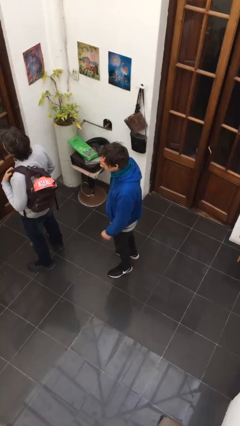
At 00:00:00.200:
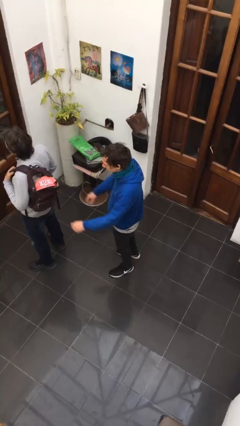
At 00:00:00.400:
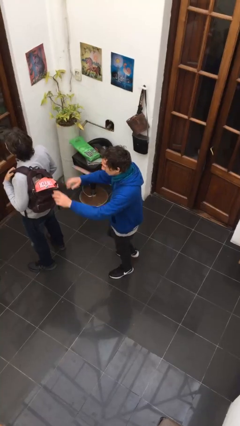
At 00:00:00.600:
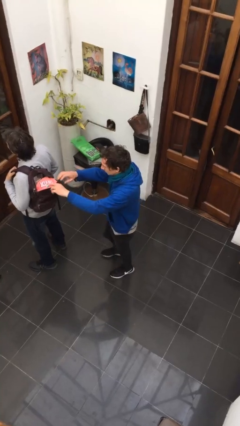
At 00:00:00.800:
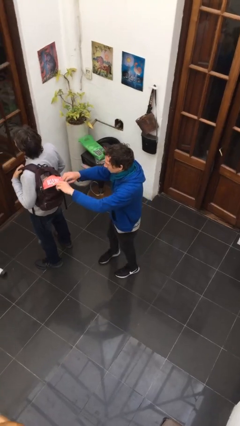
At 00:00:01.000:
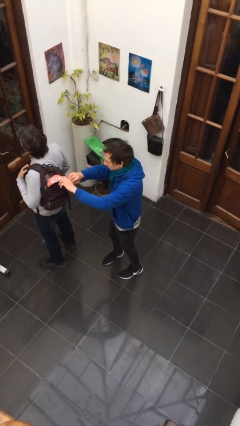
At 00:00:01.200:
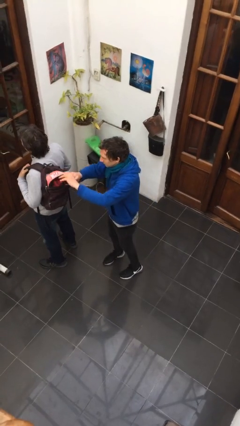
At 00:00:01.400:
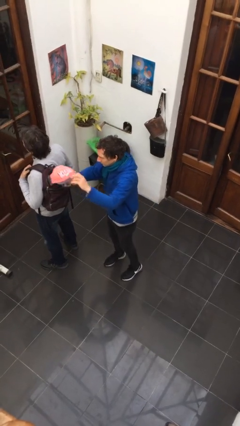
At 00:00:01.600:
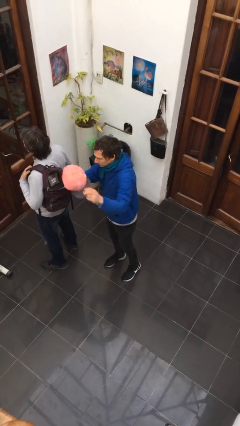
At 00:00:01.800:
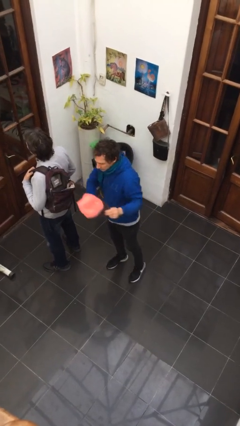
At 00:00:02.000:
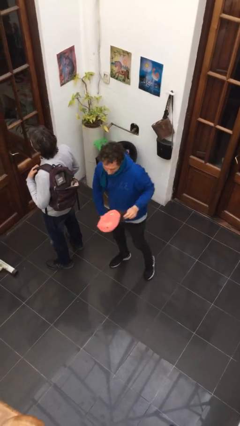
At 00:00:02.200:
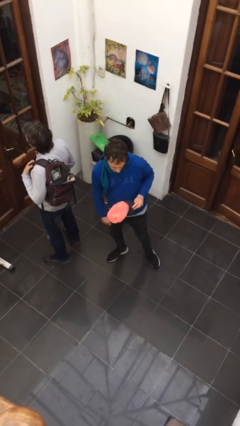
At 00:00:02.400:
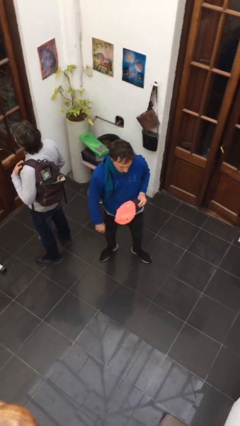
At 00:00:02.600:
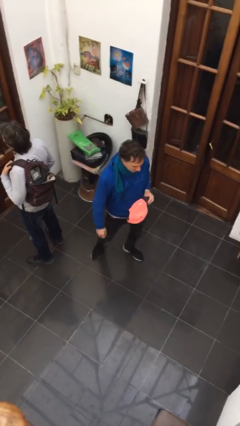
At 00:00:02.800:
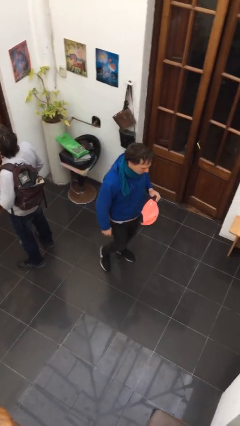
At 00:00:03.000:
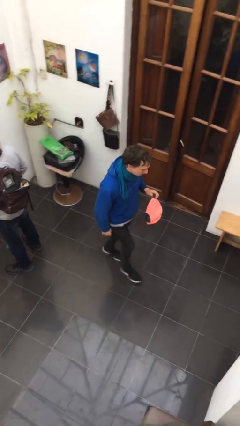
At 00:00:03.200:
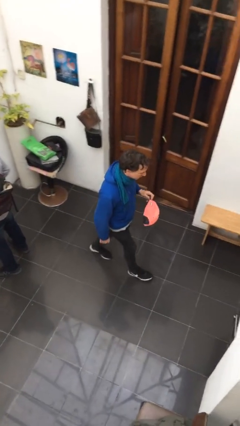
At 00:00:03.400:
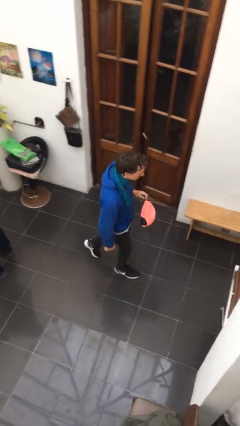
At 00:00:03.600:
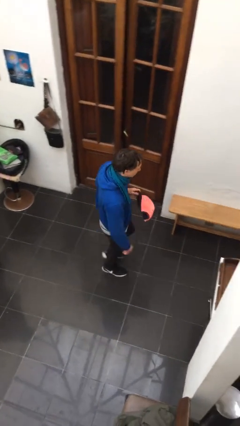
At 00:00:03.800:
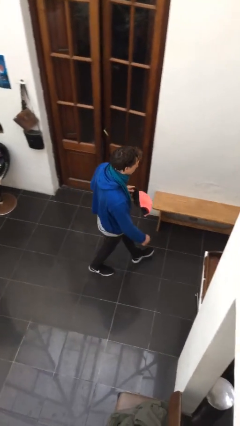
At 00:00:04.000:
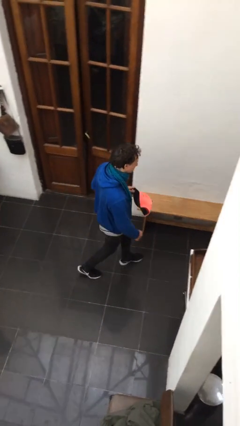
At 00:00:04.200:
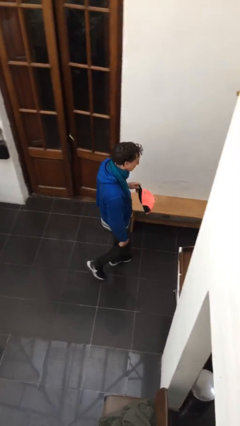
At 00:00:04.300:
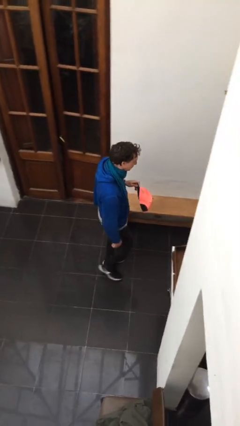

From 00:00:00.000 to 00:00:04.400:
person steals object from person

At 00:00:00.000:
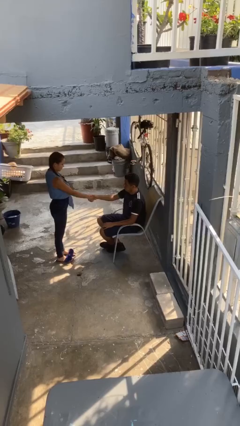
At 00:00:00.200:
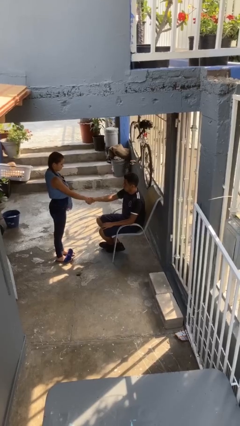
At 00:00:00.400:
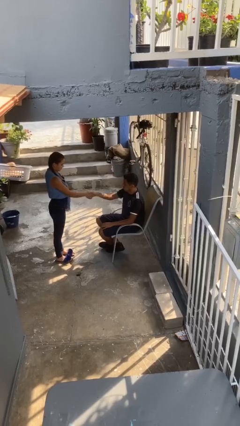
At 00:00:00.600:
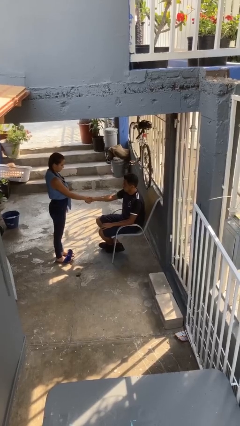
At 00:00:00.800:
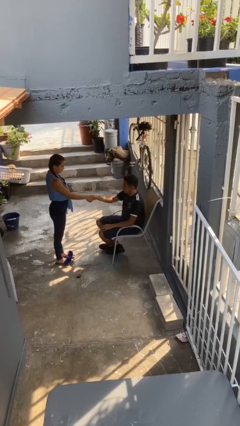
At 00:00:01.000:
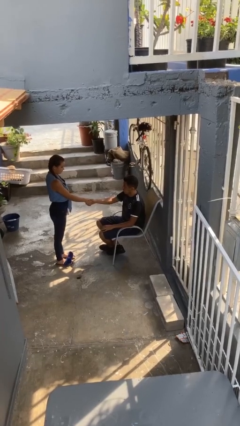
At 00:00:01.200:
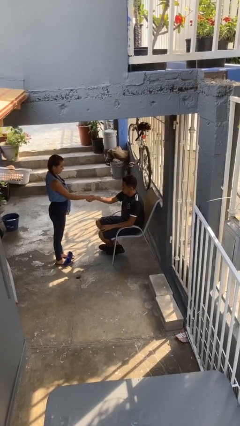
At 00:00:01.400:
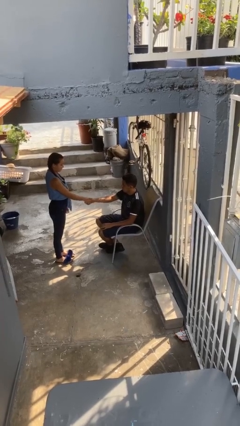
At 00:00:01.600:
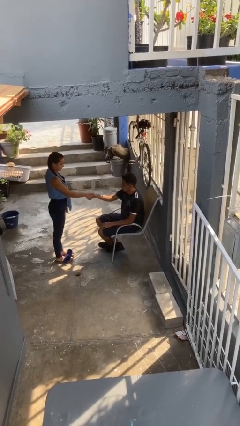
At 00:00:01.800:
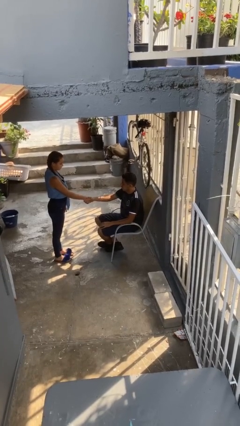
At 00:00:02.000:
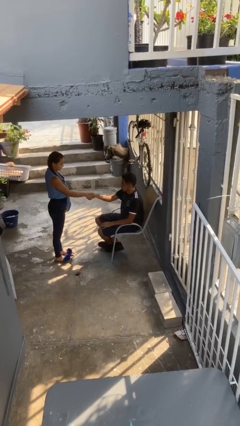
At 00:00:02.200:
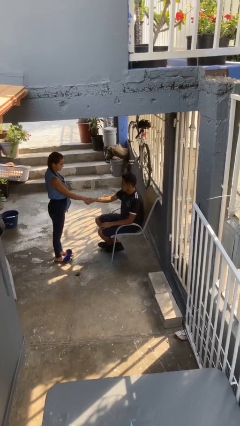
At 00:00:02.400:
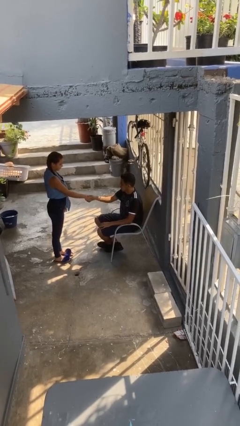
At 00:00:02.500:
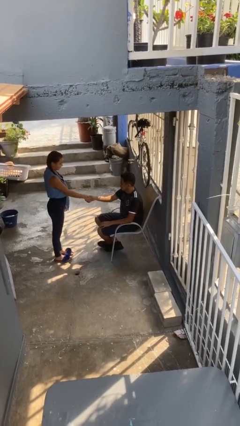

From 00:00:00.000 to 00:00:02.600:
person shakes hand

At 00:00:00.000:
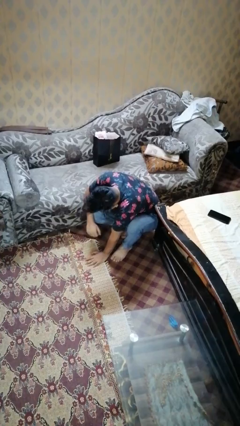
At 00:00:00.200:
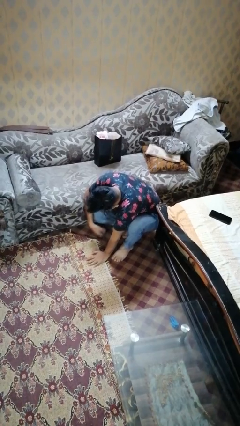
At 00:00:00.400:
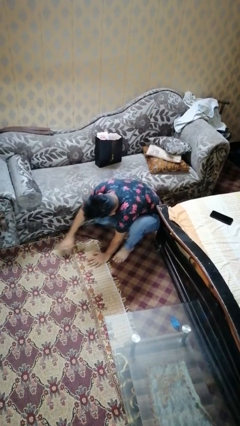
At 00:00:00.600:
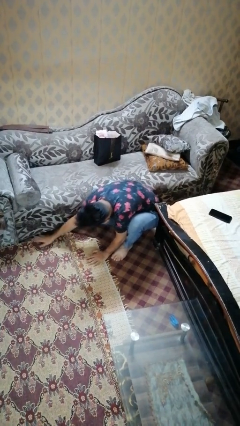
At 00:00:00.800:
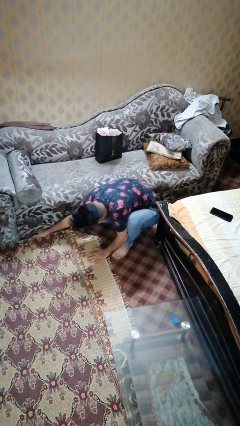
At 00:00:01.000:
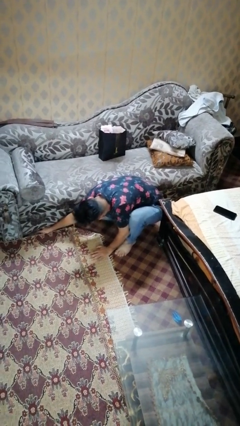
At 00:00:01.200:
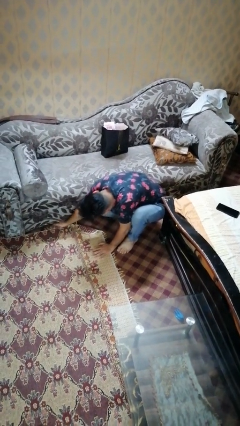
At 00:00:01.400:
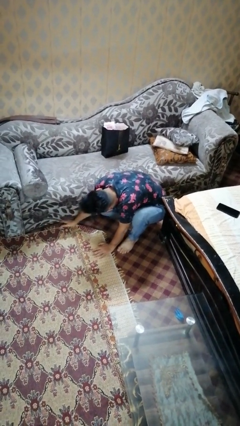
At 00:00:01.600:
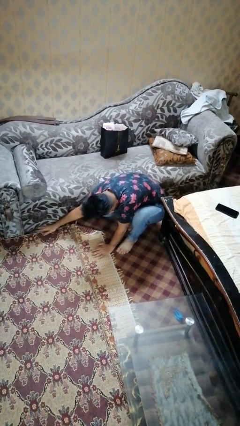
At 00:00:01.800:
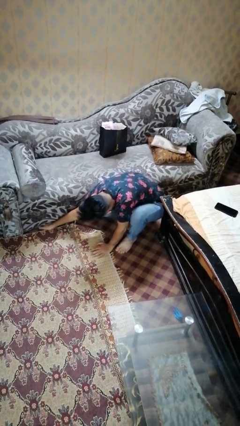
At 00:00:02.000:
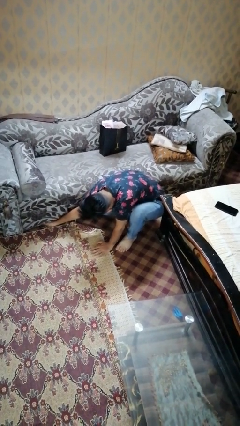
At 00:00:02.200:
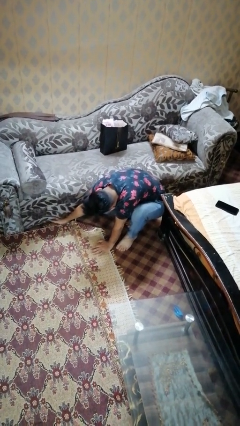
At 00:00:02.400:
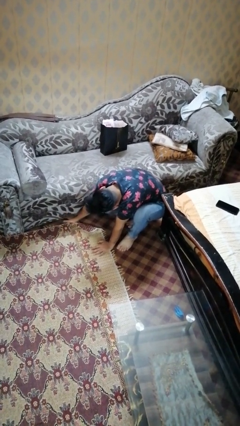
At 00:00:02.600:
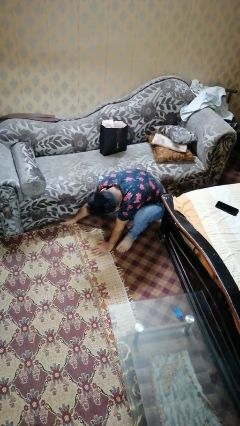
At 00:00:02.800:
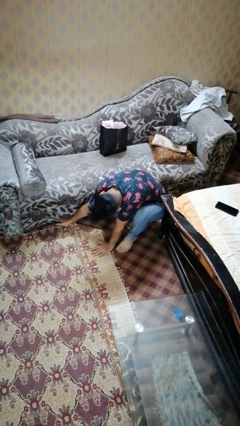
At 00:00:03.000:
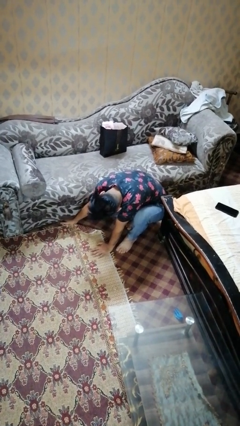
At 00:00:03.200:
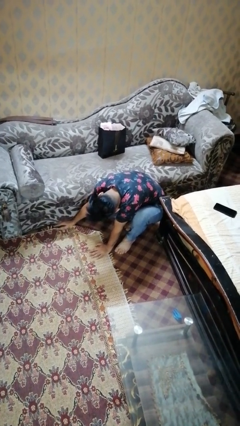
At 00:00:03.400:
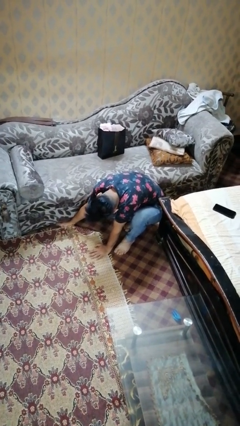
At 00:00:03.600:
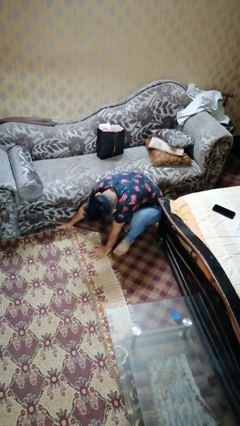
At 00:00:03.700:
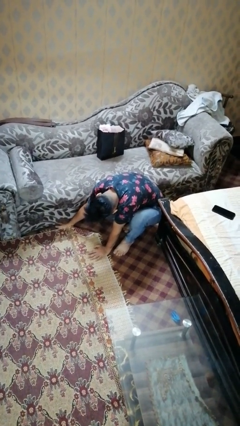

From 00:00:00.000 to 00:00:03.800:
person searches under couch

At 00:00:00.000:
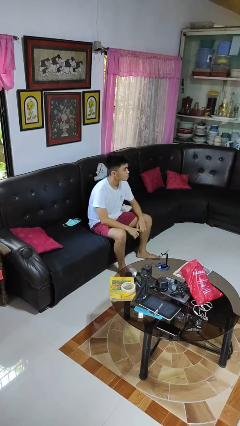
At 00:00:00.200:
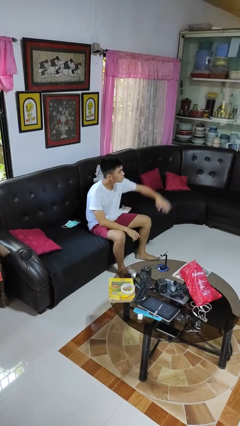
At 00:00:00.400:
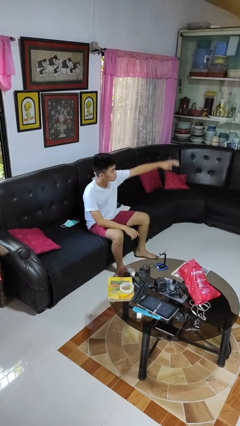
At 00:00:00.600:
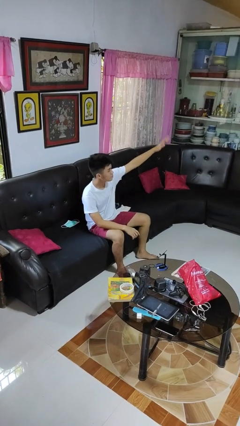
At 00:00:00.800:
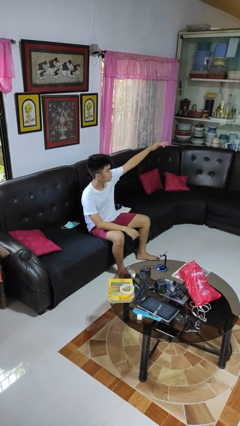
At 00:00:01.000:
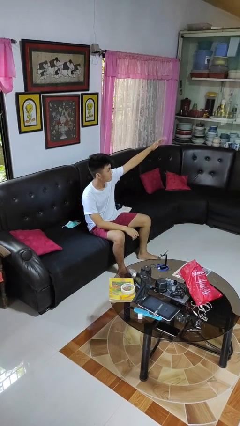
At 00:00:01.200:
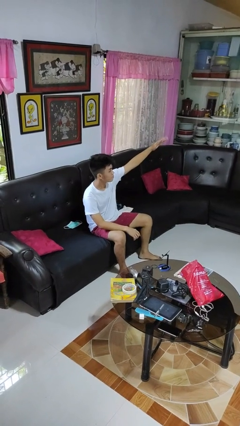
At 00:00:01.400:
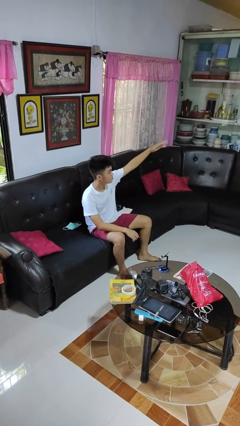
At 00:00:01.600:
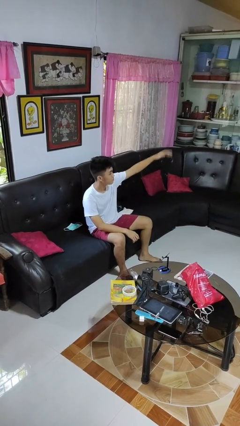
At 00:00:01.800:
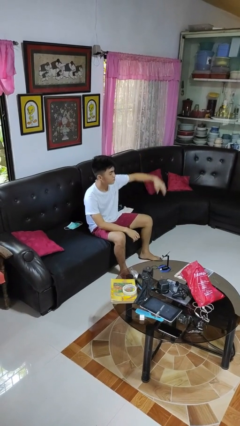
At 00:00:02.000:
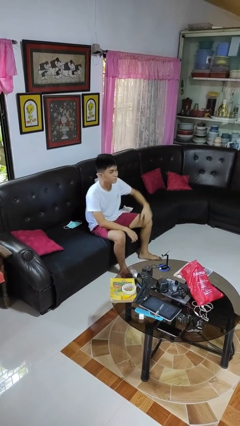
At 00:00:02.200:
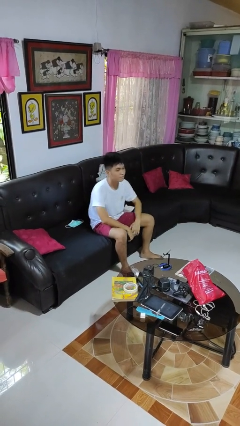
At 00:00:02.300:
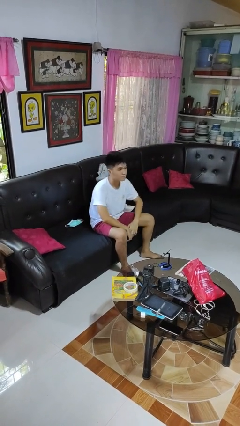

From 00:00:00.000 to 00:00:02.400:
person gestures come here

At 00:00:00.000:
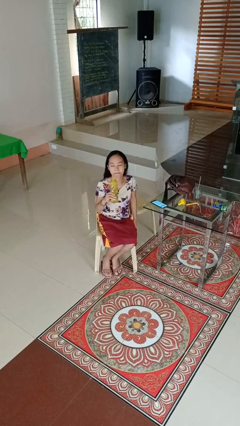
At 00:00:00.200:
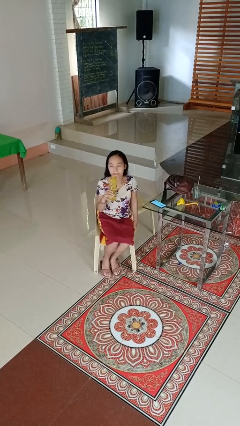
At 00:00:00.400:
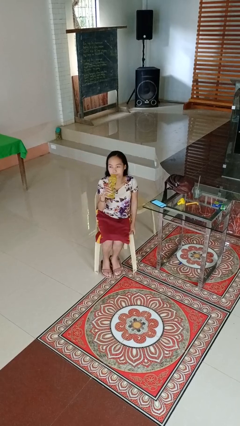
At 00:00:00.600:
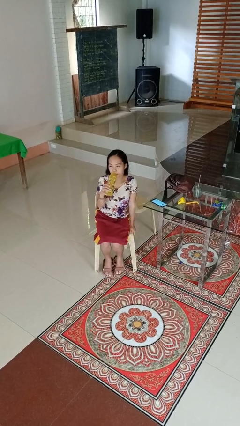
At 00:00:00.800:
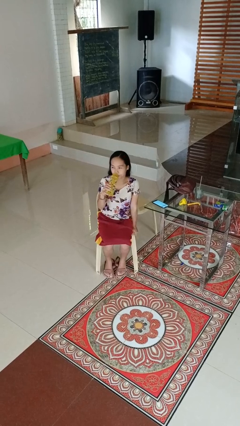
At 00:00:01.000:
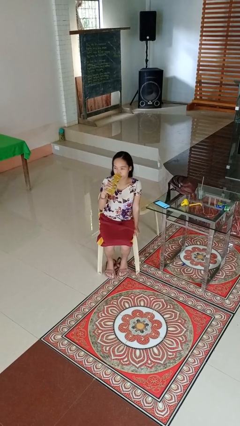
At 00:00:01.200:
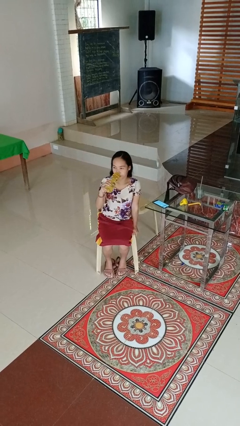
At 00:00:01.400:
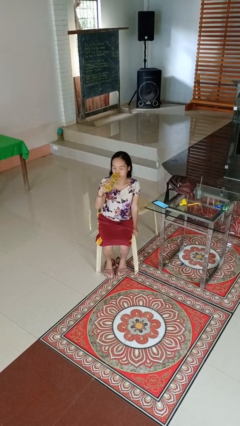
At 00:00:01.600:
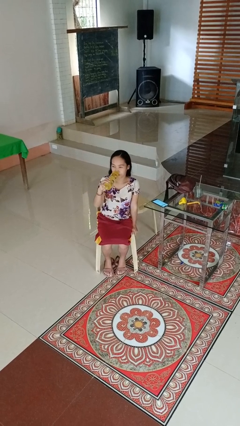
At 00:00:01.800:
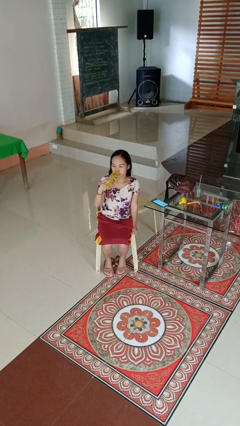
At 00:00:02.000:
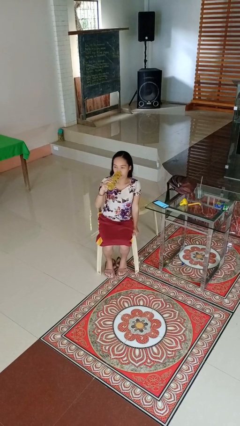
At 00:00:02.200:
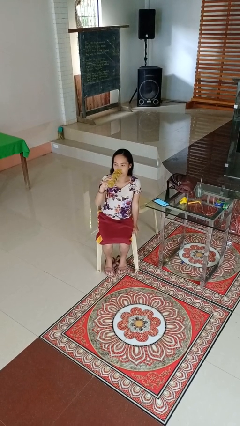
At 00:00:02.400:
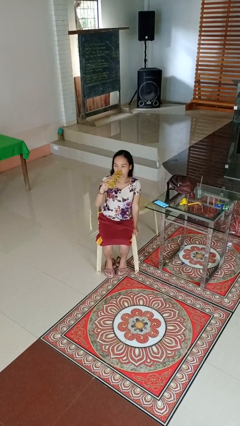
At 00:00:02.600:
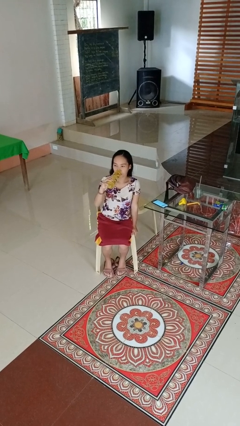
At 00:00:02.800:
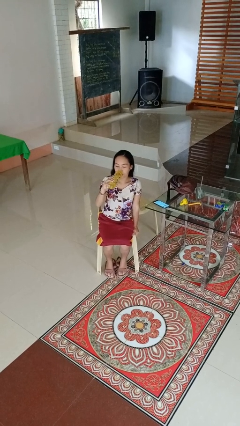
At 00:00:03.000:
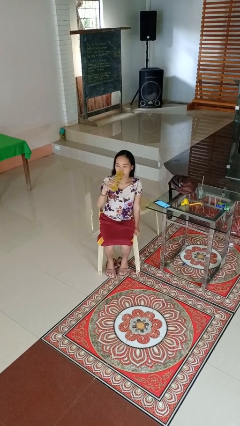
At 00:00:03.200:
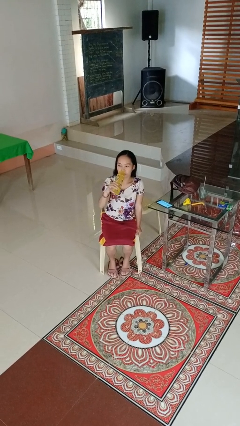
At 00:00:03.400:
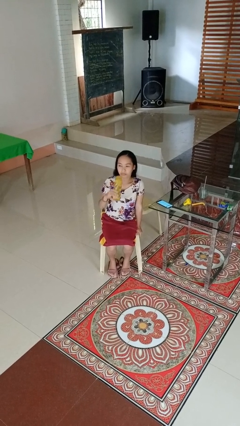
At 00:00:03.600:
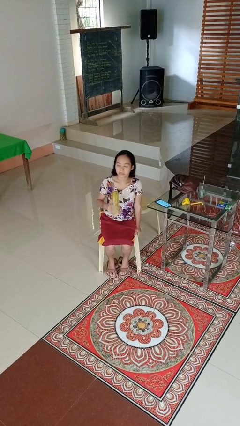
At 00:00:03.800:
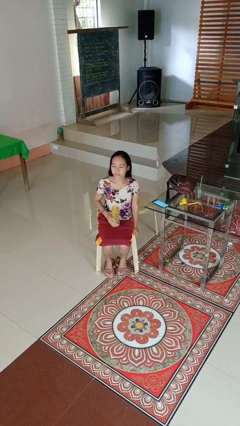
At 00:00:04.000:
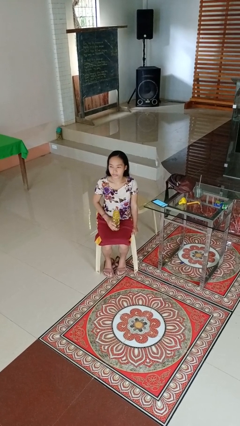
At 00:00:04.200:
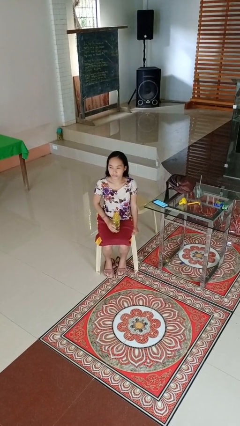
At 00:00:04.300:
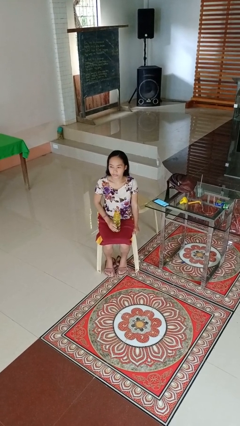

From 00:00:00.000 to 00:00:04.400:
person drinks from bottle
